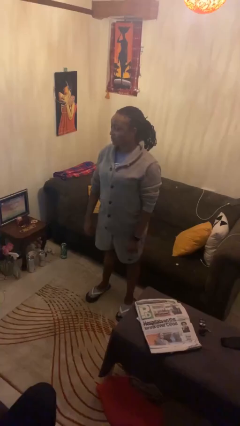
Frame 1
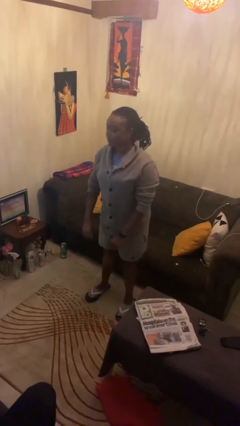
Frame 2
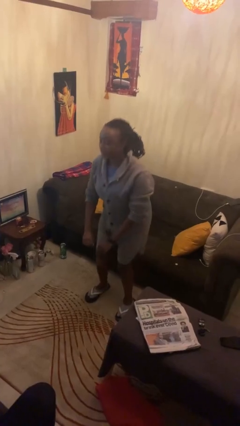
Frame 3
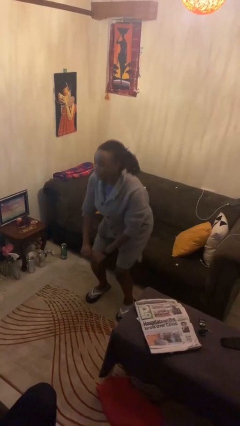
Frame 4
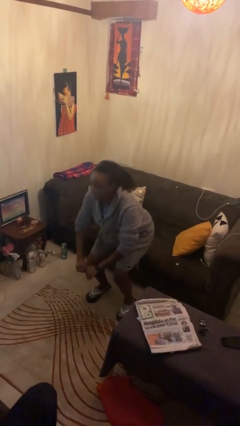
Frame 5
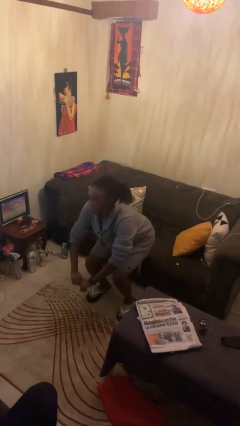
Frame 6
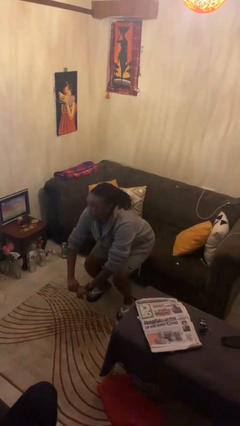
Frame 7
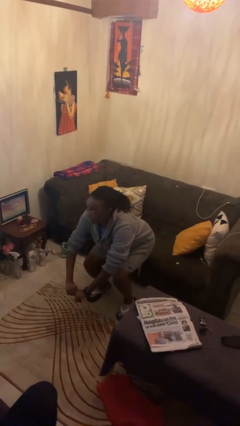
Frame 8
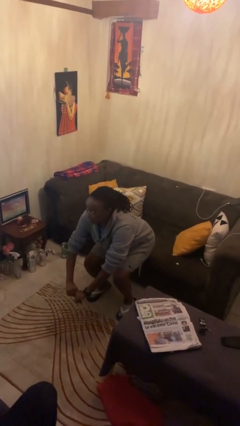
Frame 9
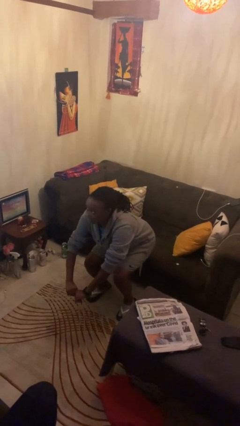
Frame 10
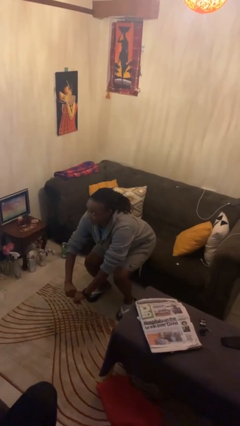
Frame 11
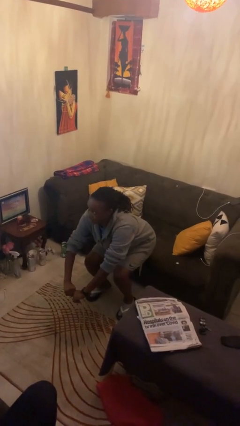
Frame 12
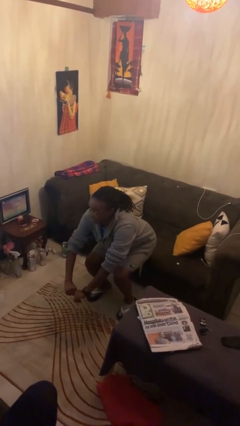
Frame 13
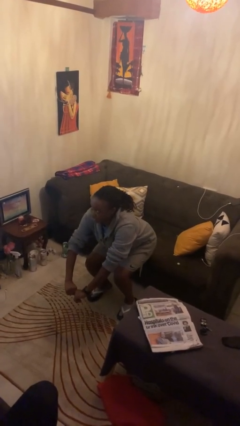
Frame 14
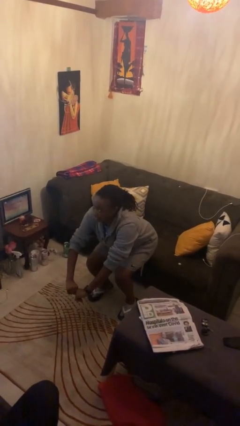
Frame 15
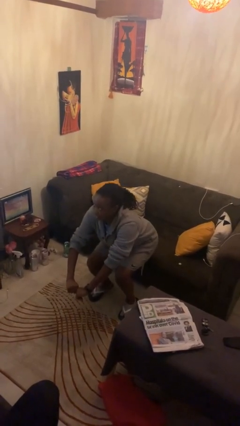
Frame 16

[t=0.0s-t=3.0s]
person squats

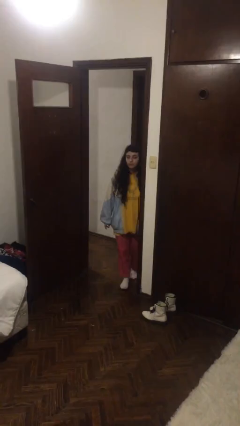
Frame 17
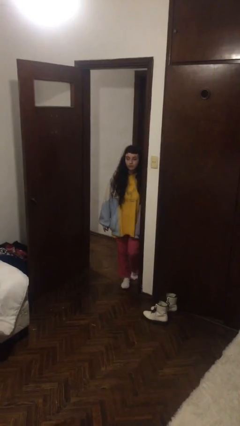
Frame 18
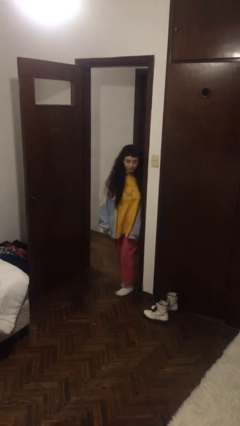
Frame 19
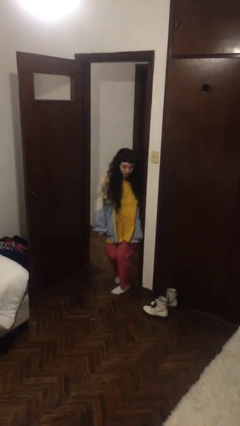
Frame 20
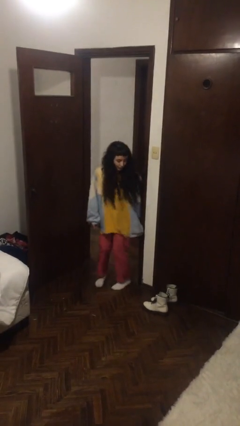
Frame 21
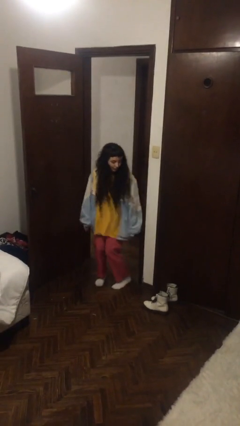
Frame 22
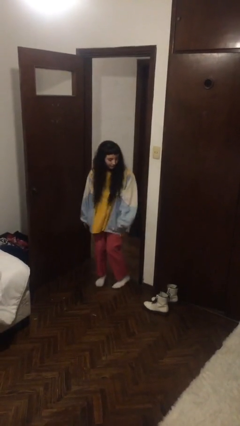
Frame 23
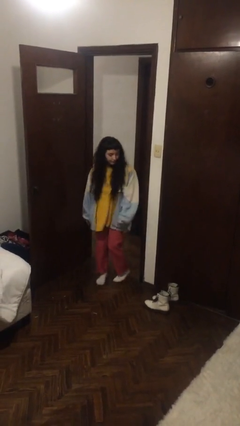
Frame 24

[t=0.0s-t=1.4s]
person bumps into wall

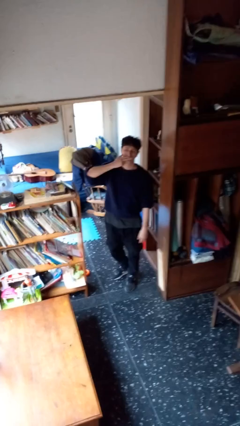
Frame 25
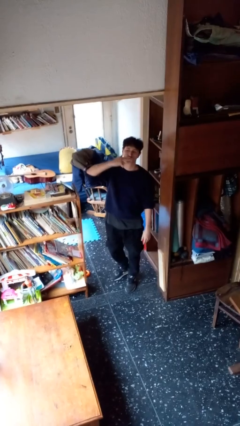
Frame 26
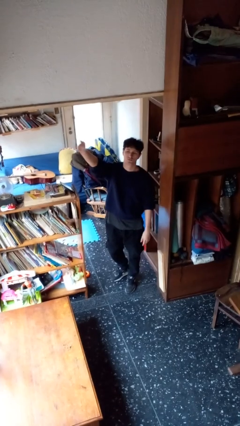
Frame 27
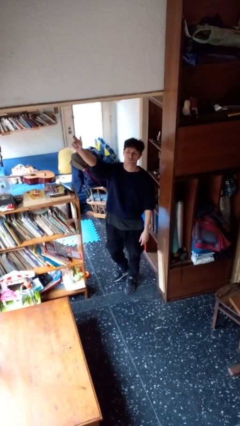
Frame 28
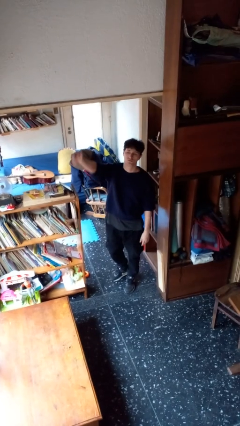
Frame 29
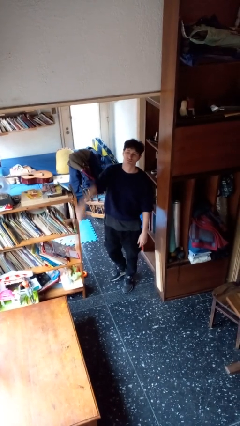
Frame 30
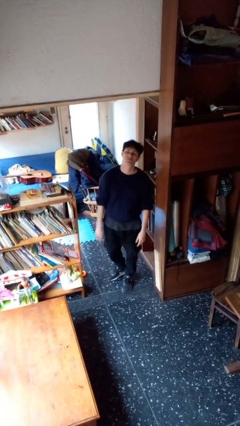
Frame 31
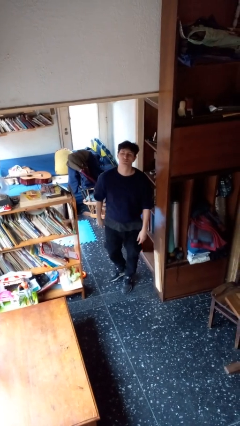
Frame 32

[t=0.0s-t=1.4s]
person gestures blow kiss

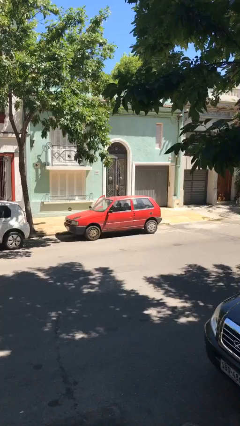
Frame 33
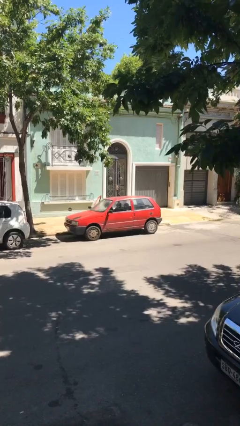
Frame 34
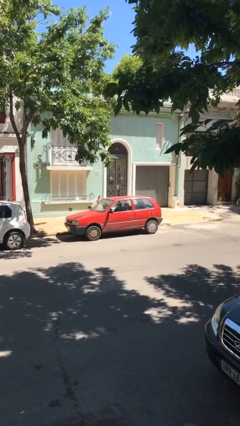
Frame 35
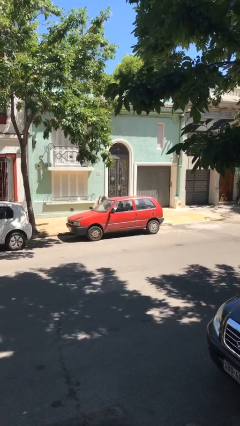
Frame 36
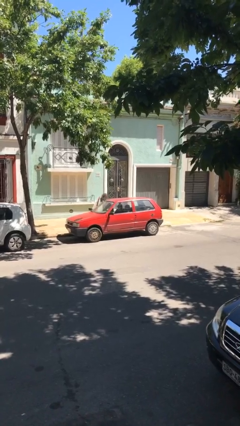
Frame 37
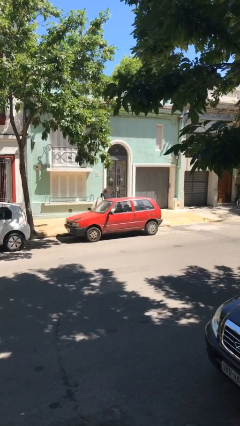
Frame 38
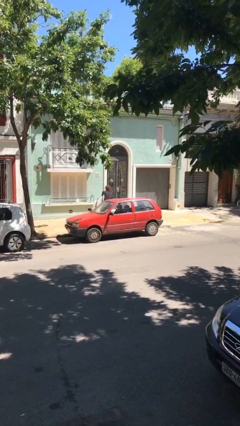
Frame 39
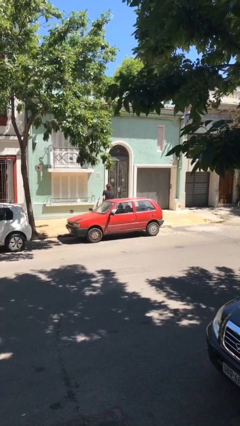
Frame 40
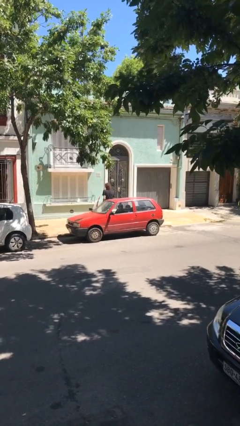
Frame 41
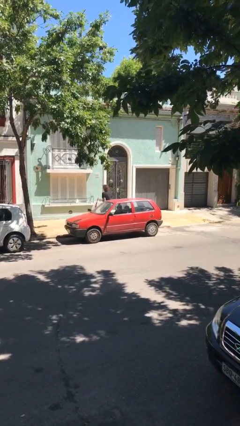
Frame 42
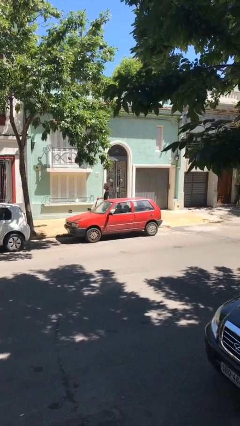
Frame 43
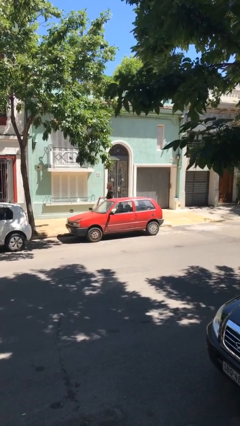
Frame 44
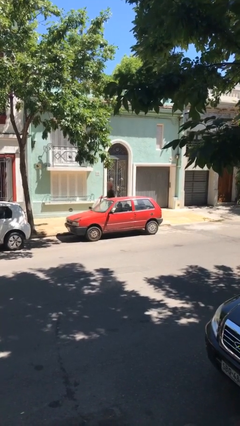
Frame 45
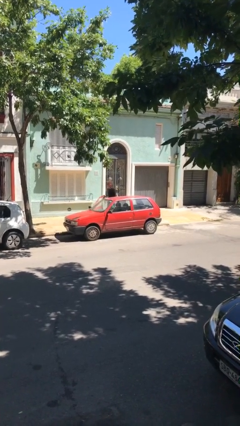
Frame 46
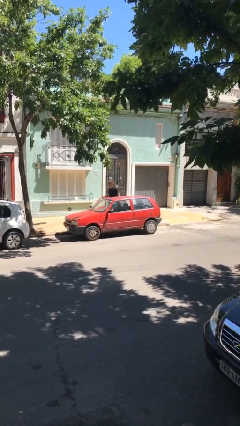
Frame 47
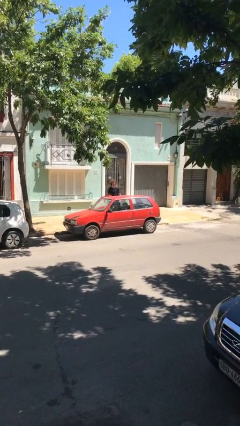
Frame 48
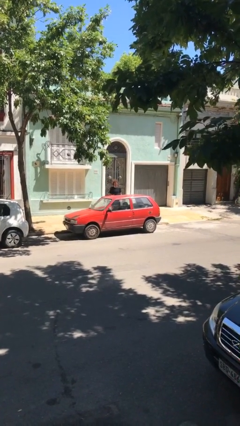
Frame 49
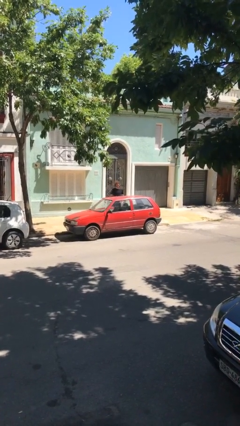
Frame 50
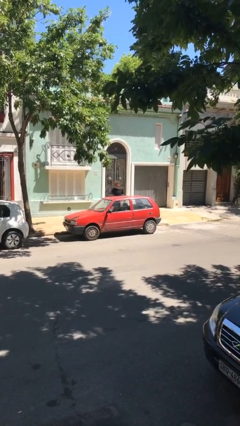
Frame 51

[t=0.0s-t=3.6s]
car drops off person

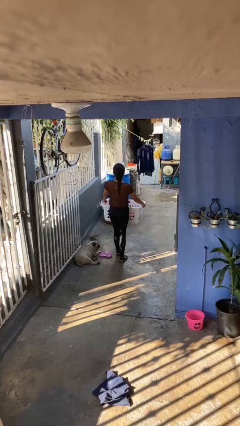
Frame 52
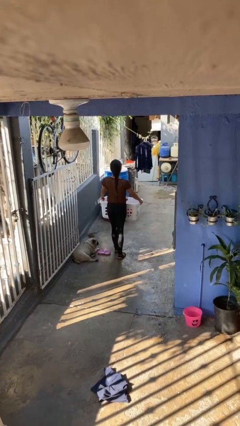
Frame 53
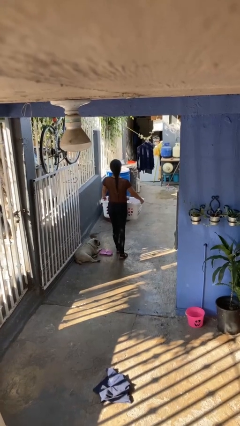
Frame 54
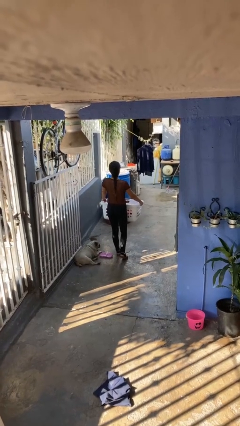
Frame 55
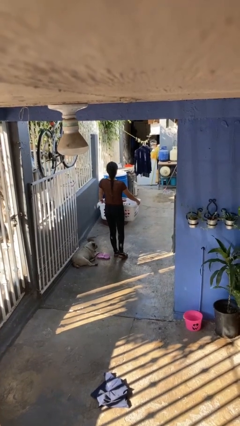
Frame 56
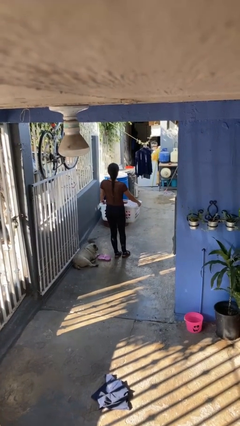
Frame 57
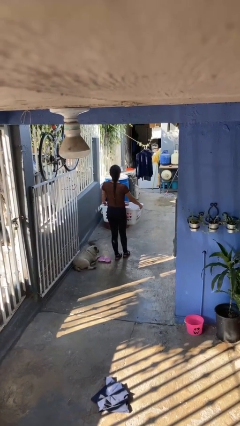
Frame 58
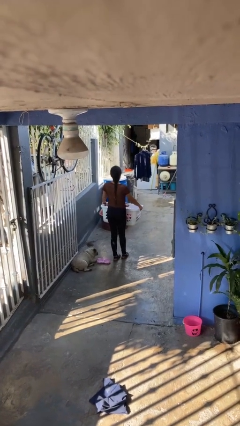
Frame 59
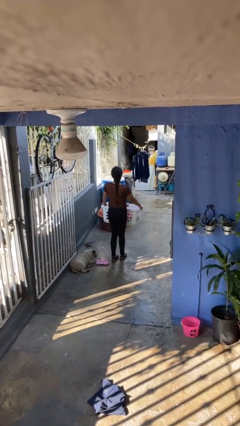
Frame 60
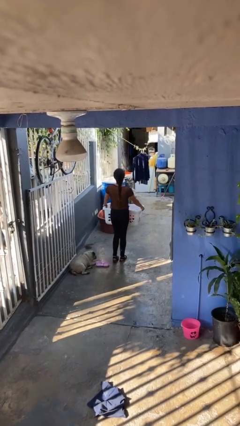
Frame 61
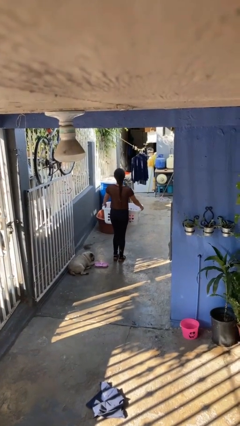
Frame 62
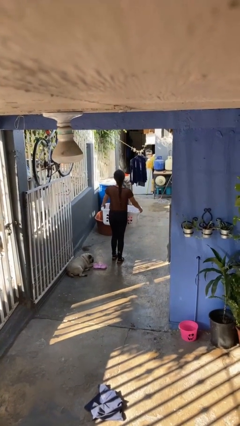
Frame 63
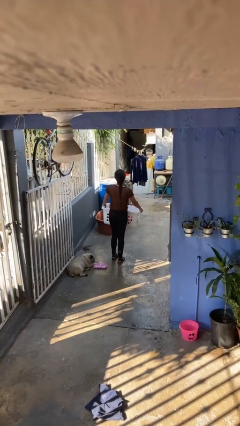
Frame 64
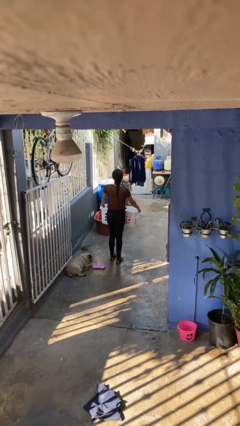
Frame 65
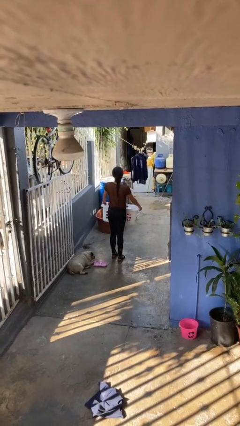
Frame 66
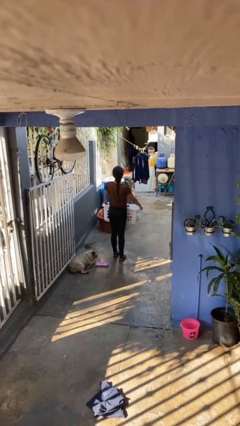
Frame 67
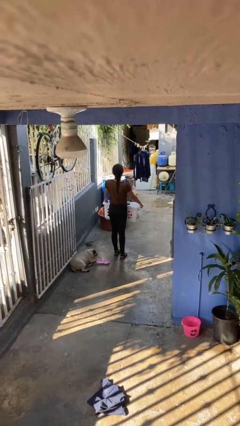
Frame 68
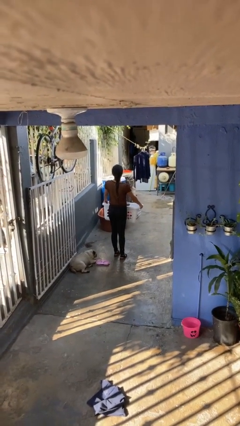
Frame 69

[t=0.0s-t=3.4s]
person carries laundry basket

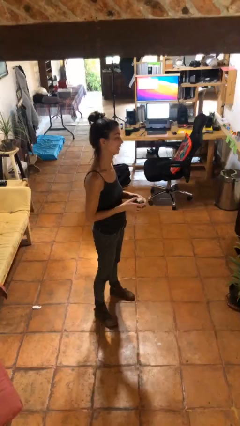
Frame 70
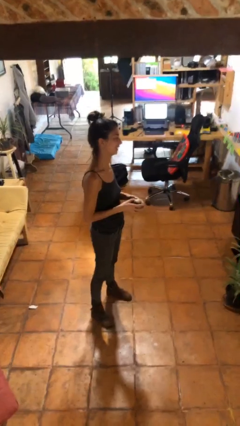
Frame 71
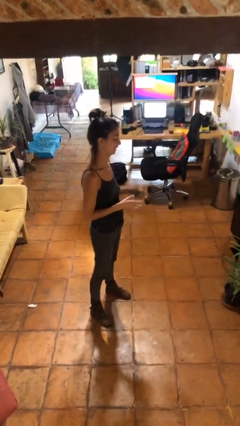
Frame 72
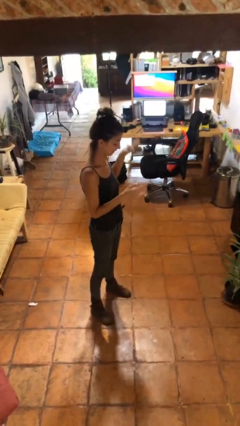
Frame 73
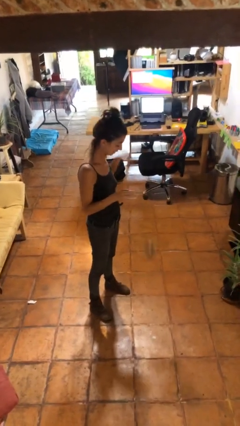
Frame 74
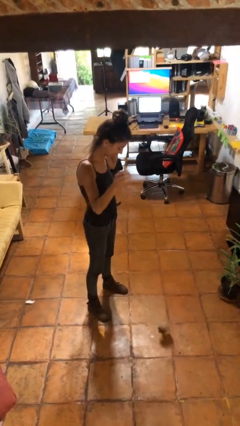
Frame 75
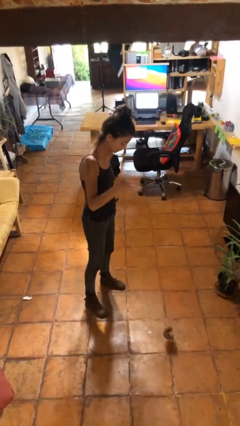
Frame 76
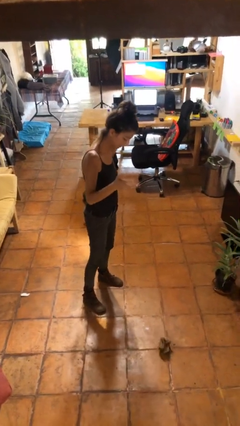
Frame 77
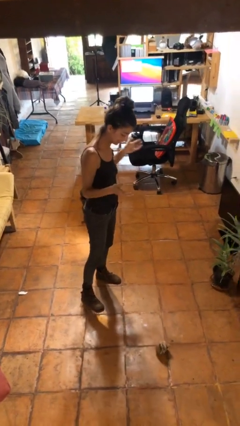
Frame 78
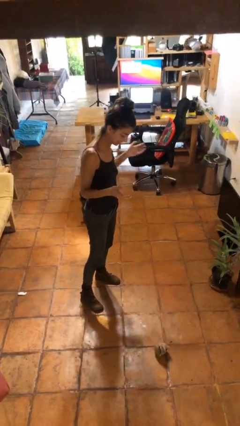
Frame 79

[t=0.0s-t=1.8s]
person drops object

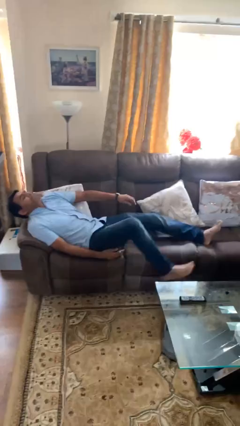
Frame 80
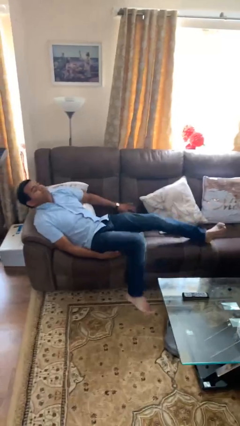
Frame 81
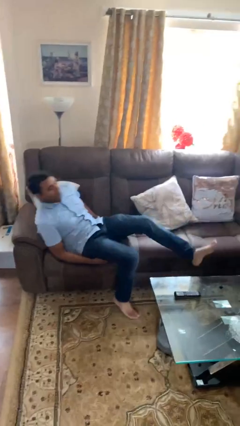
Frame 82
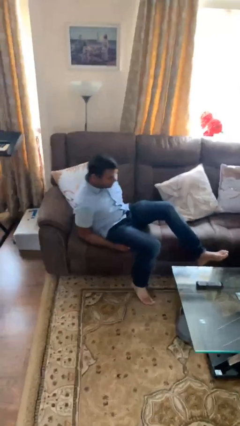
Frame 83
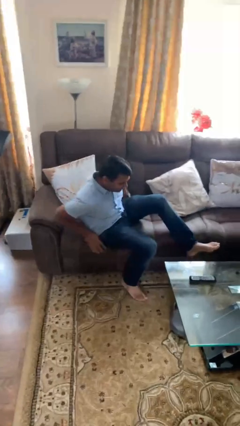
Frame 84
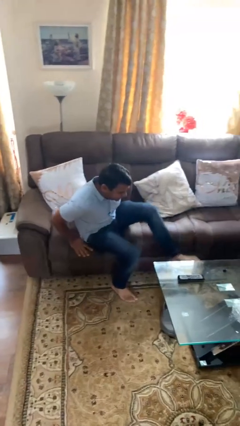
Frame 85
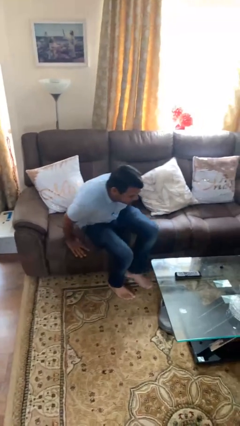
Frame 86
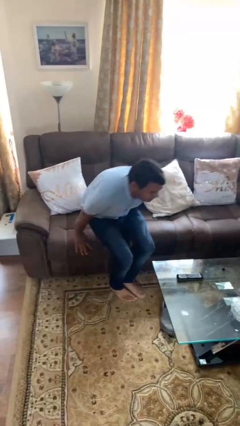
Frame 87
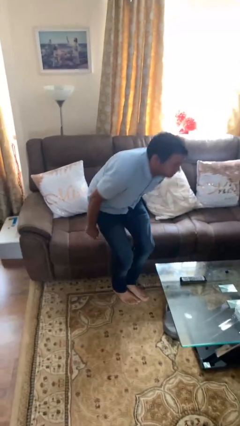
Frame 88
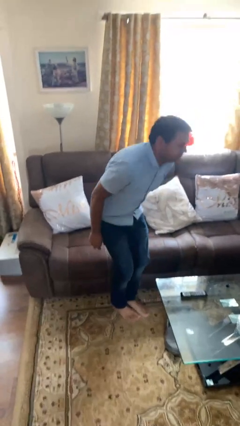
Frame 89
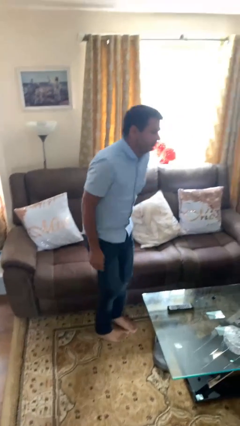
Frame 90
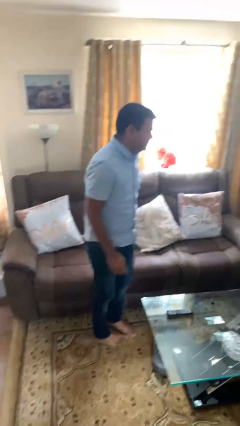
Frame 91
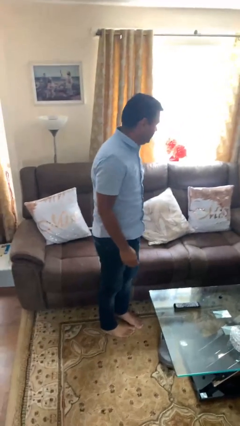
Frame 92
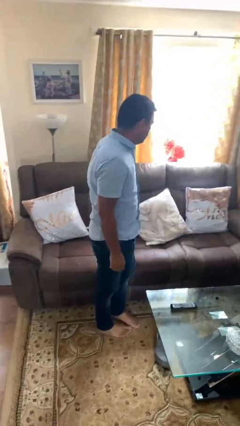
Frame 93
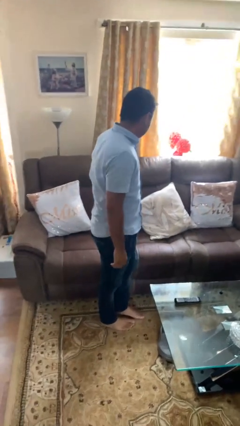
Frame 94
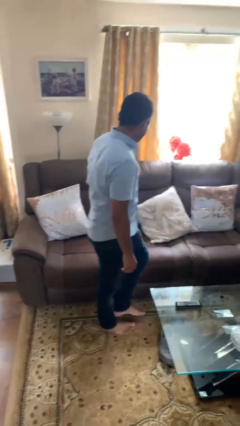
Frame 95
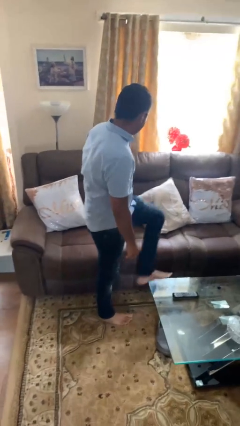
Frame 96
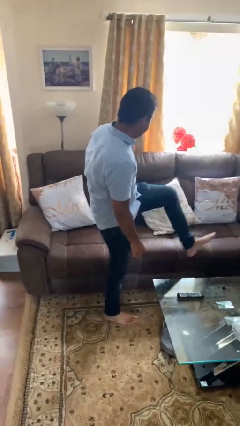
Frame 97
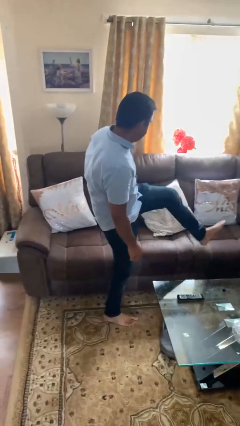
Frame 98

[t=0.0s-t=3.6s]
person stands up
